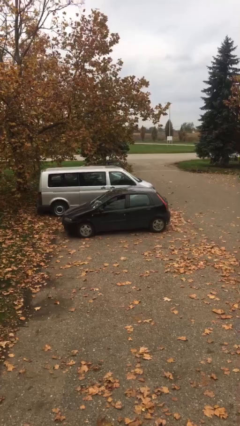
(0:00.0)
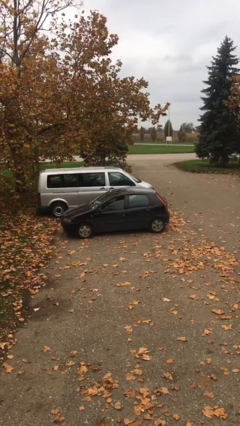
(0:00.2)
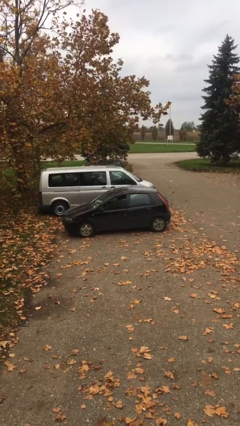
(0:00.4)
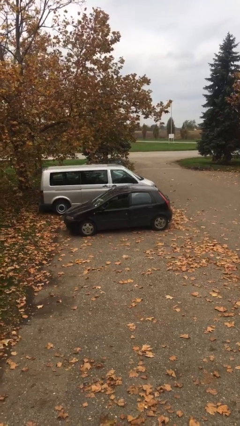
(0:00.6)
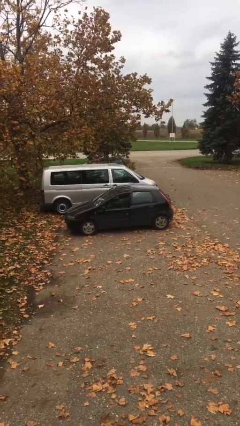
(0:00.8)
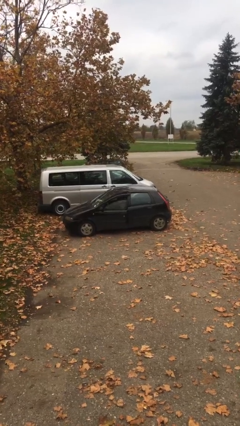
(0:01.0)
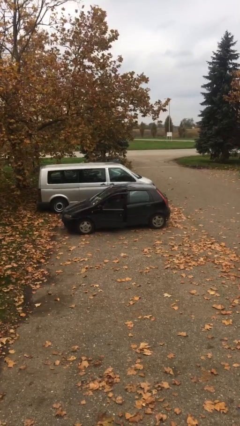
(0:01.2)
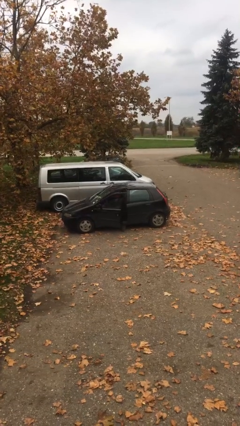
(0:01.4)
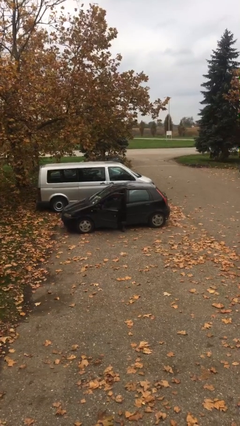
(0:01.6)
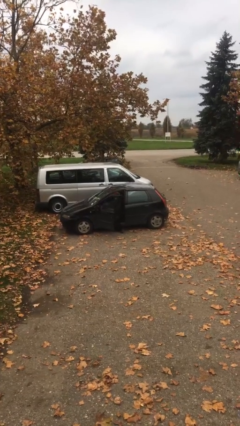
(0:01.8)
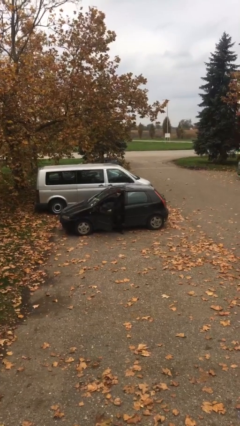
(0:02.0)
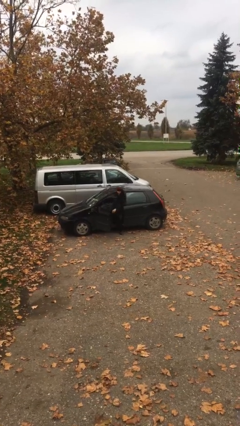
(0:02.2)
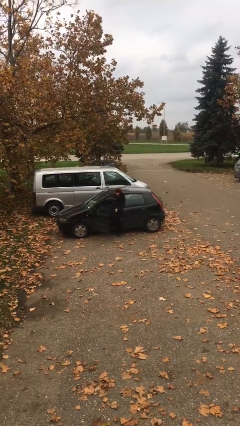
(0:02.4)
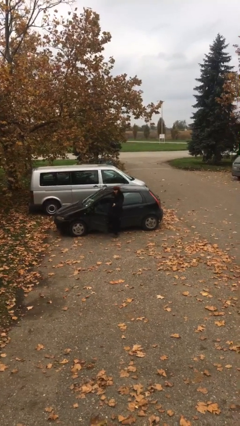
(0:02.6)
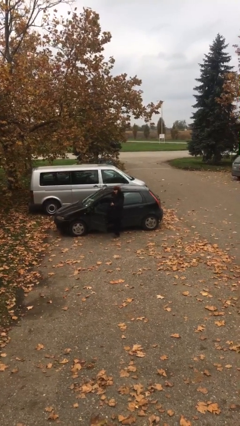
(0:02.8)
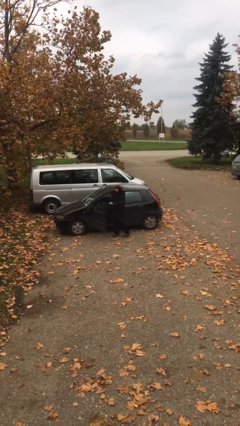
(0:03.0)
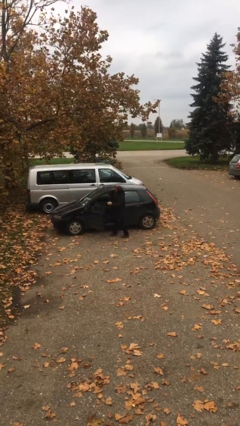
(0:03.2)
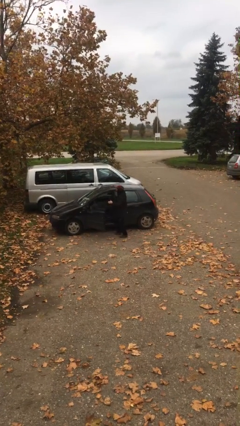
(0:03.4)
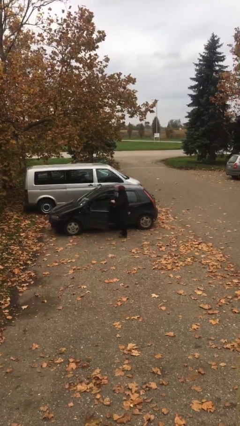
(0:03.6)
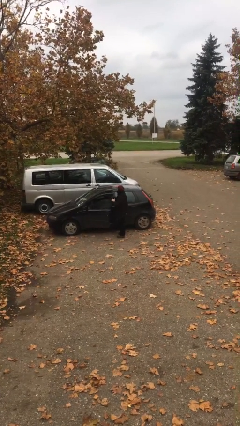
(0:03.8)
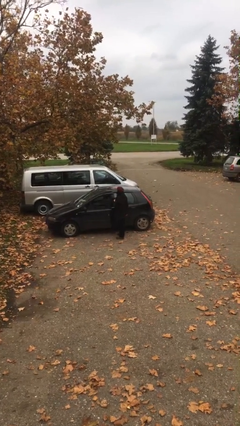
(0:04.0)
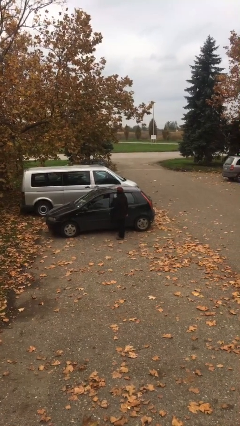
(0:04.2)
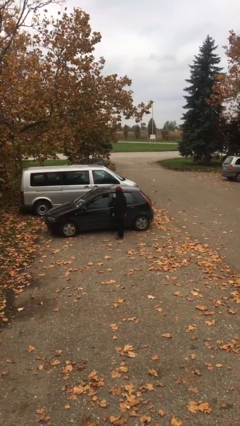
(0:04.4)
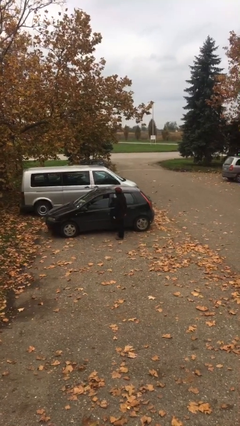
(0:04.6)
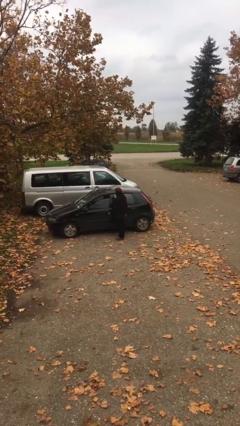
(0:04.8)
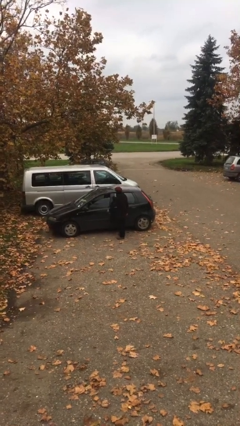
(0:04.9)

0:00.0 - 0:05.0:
person exits car

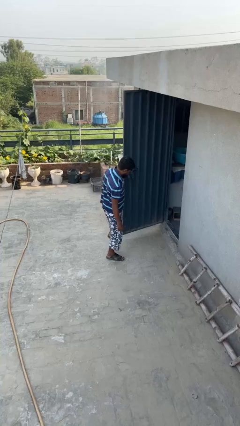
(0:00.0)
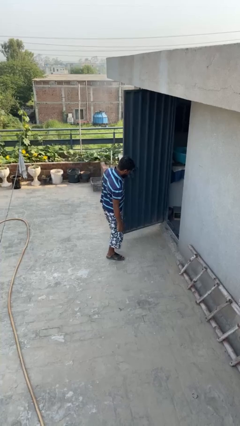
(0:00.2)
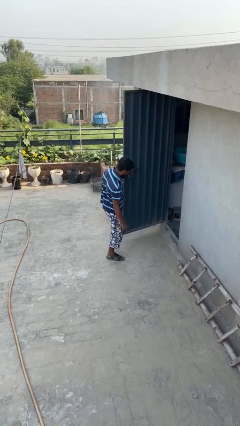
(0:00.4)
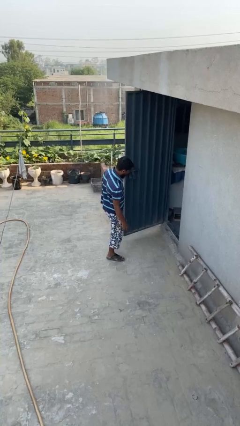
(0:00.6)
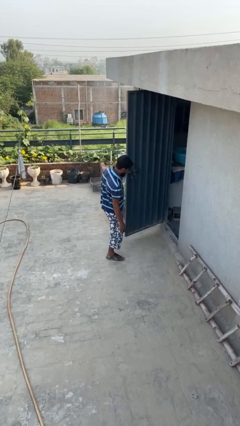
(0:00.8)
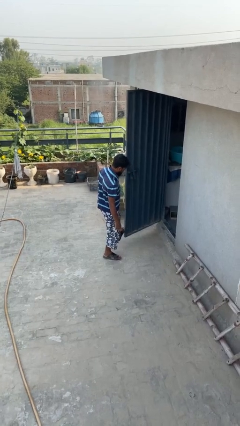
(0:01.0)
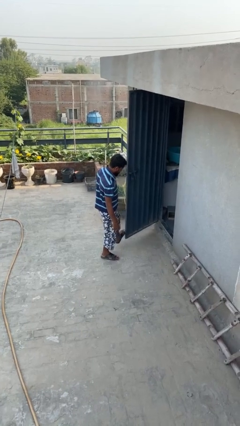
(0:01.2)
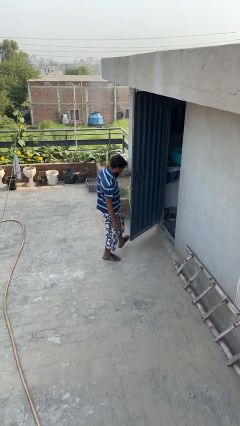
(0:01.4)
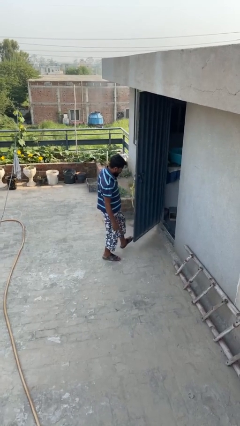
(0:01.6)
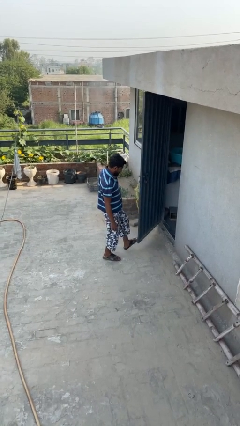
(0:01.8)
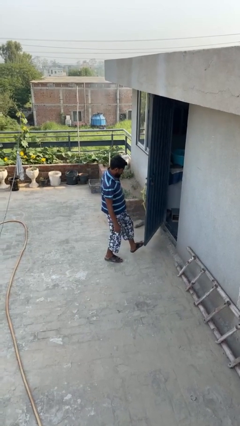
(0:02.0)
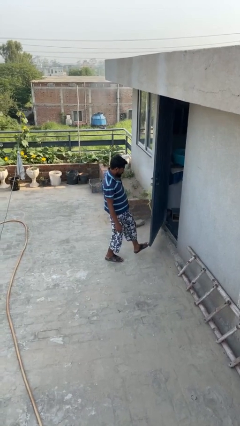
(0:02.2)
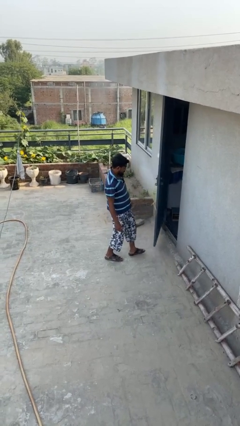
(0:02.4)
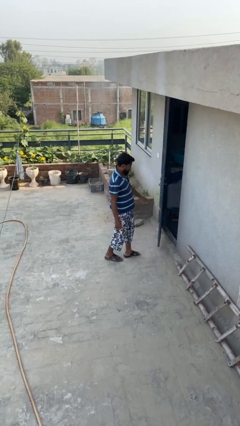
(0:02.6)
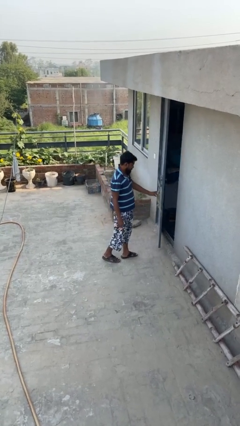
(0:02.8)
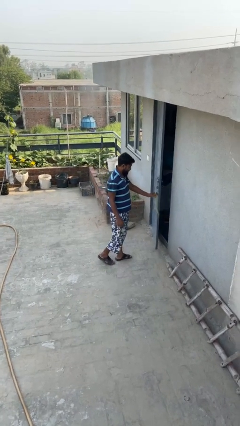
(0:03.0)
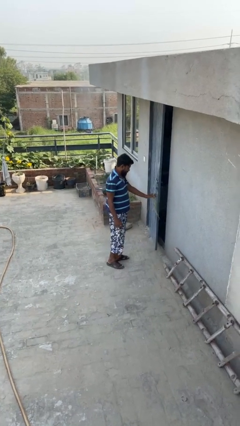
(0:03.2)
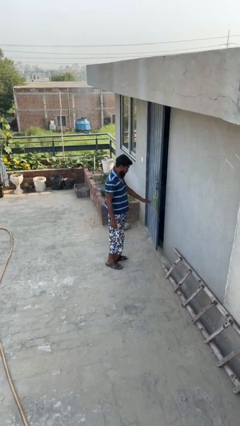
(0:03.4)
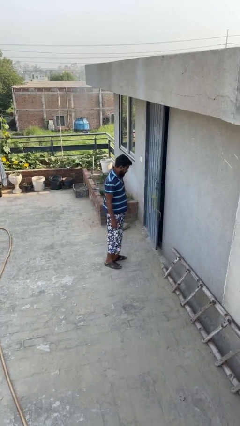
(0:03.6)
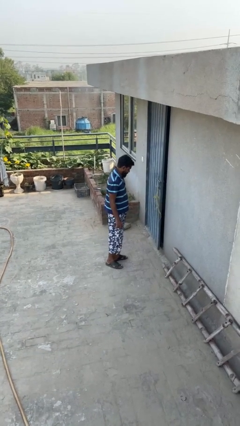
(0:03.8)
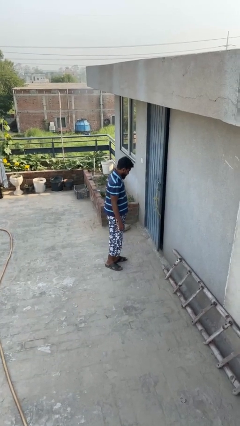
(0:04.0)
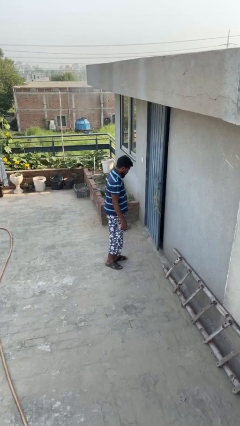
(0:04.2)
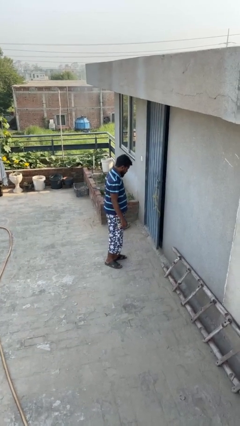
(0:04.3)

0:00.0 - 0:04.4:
person closes door with foot

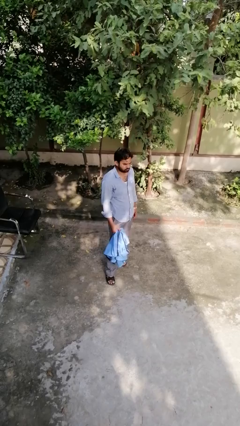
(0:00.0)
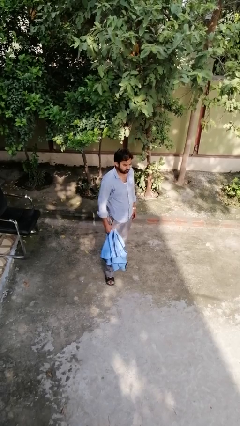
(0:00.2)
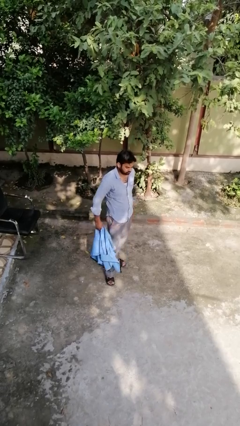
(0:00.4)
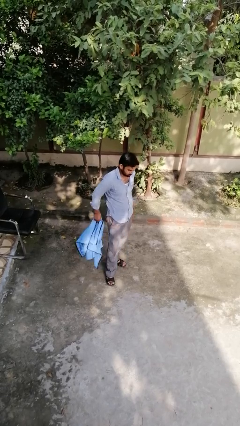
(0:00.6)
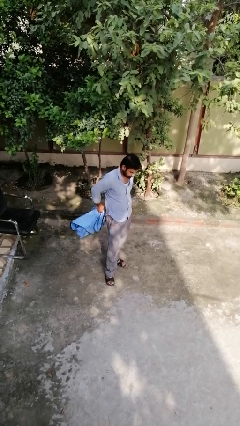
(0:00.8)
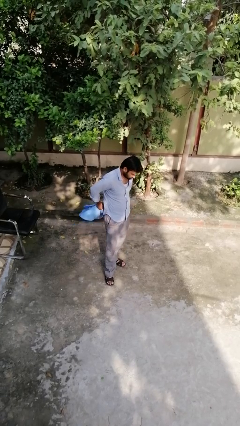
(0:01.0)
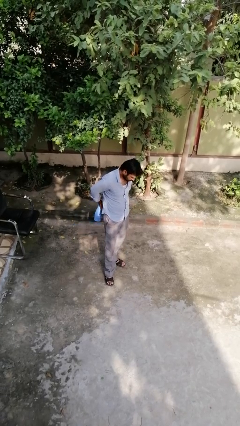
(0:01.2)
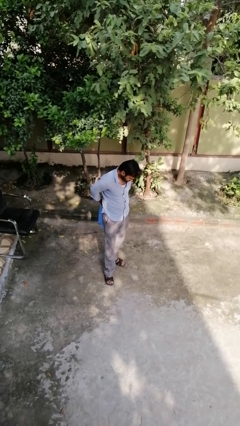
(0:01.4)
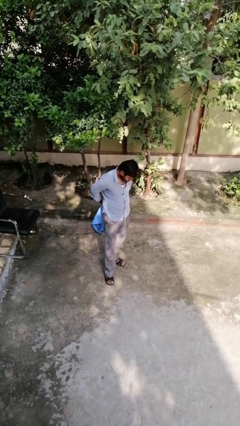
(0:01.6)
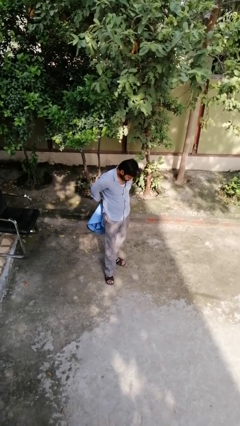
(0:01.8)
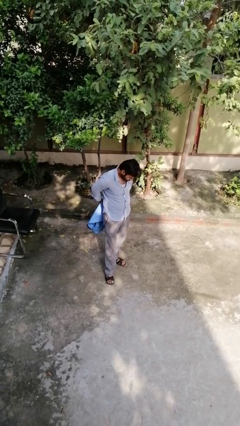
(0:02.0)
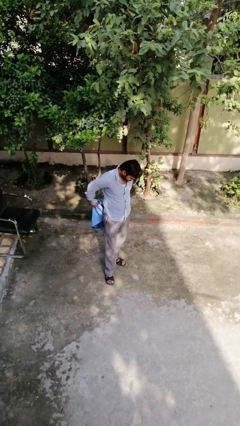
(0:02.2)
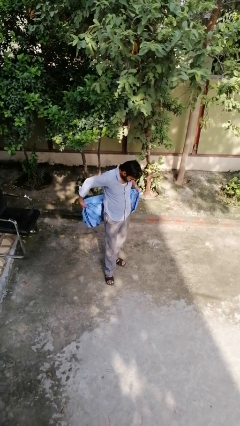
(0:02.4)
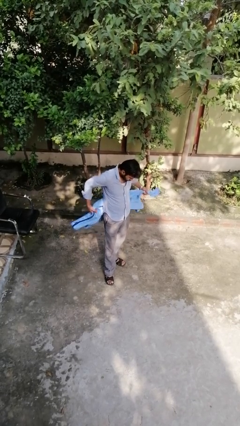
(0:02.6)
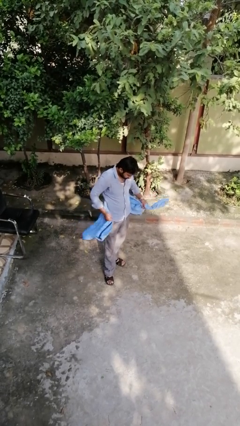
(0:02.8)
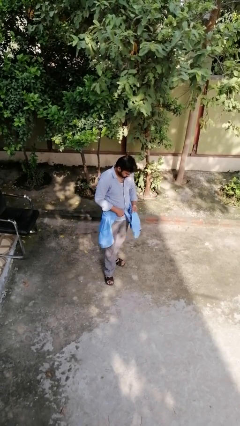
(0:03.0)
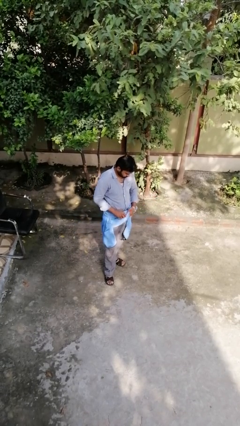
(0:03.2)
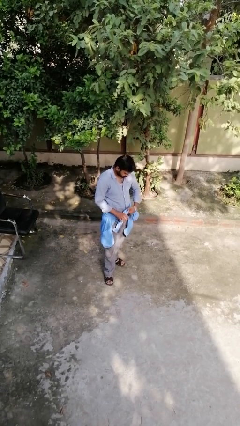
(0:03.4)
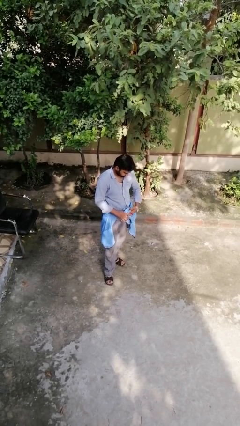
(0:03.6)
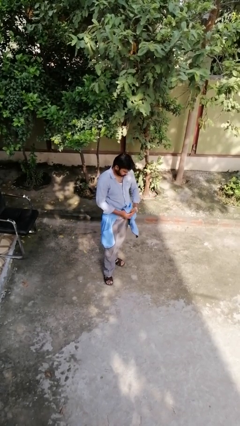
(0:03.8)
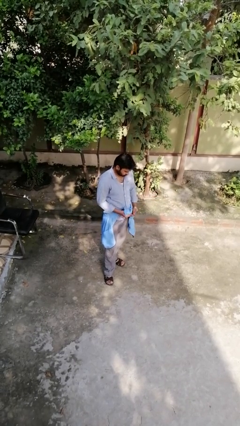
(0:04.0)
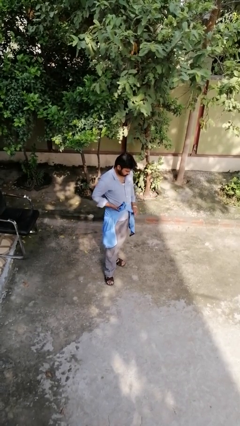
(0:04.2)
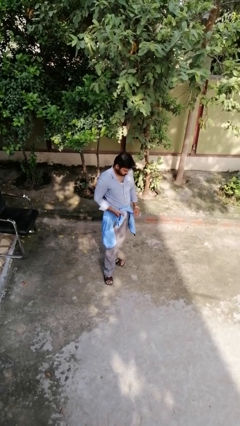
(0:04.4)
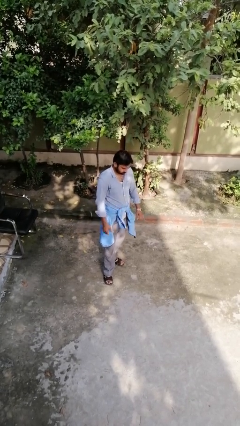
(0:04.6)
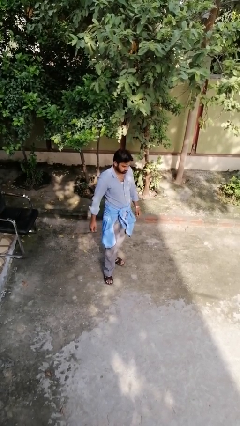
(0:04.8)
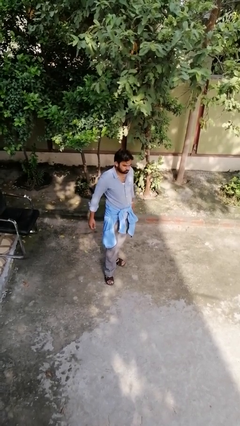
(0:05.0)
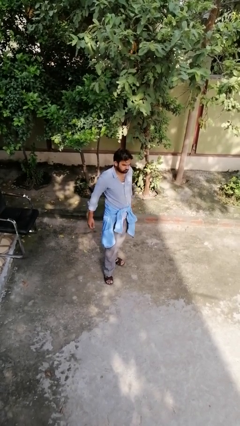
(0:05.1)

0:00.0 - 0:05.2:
person ties jacket around waist

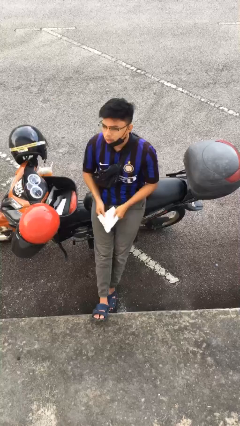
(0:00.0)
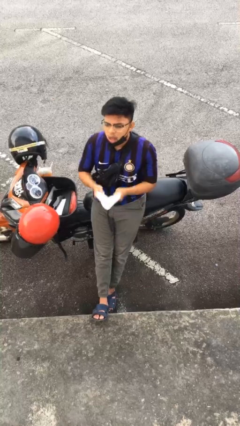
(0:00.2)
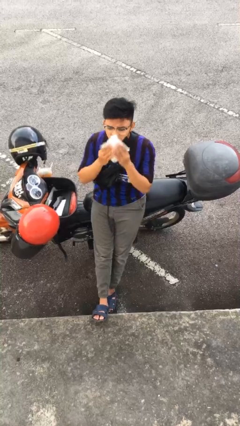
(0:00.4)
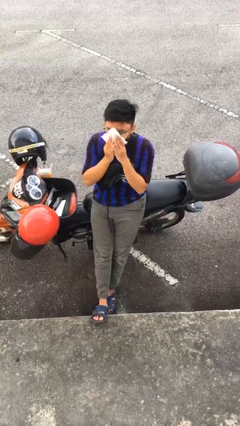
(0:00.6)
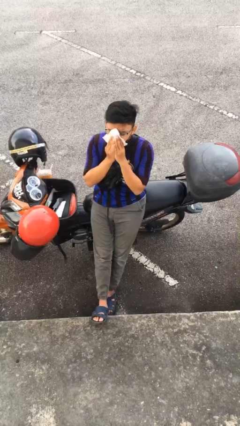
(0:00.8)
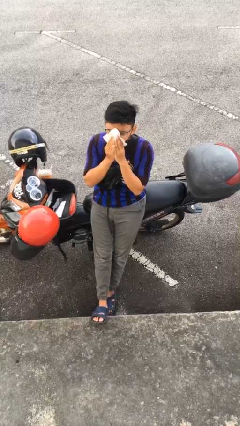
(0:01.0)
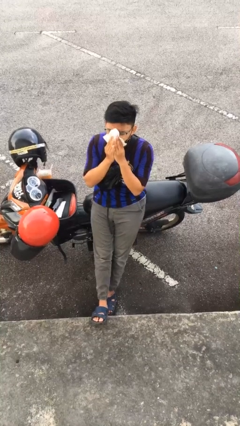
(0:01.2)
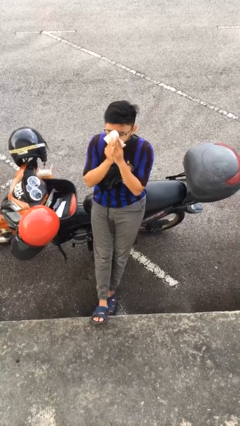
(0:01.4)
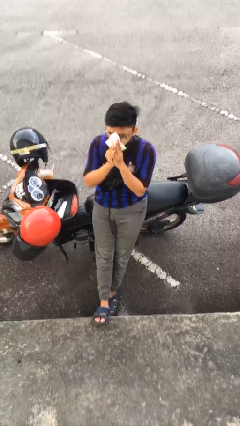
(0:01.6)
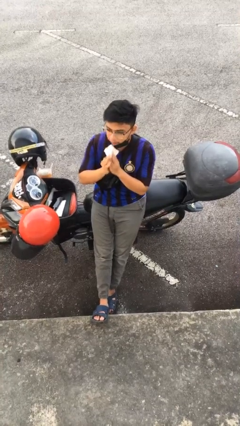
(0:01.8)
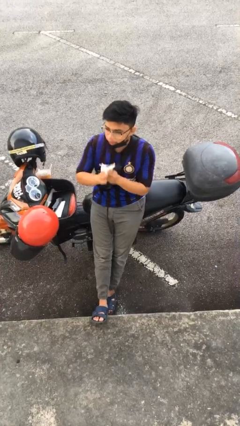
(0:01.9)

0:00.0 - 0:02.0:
person blows nose

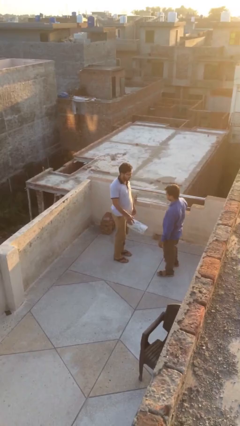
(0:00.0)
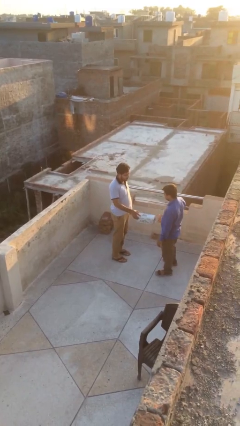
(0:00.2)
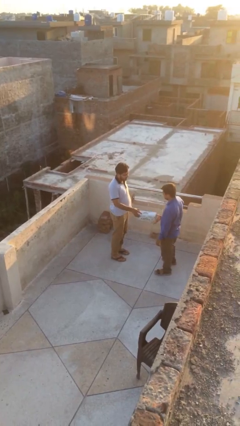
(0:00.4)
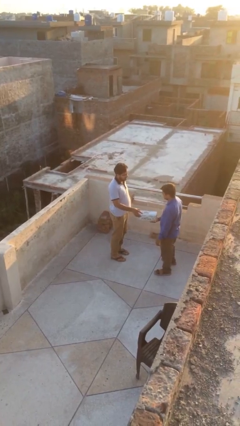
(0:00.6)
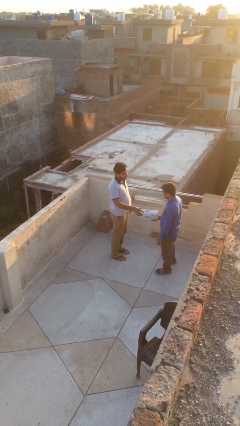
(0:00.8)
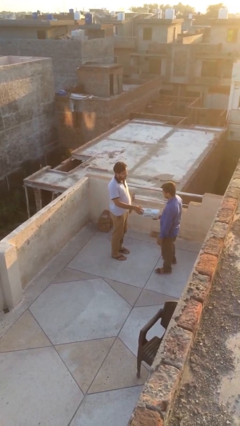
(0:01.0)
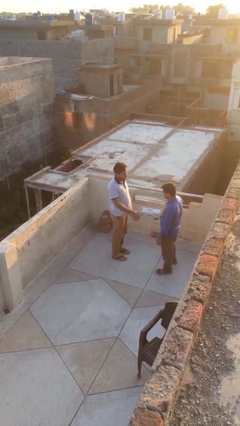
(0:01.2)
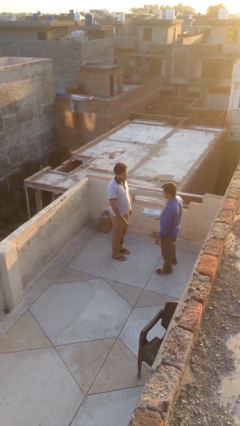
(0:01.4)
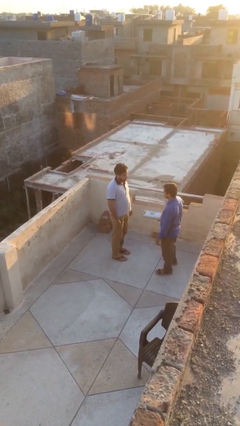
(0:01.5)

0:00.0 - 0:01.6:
person transfers object to person
